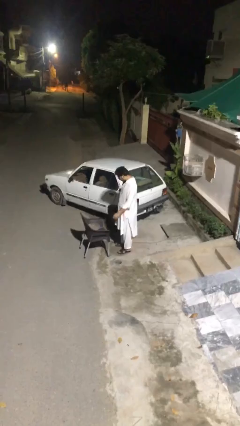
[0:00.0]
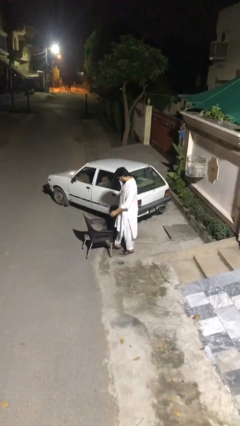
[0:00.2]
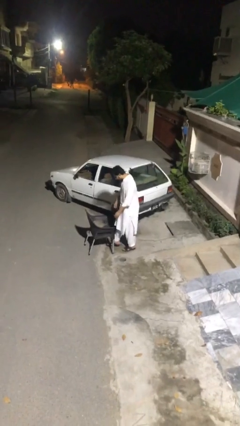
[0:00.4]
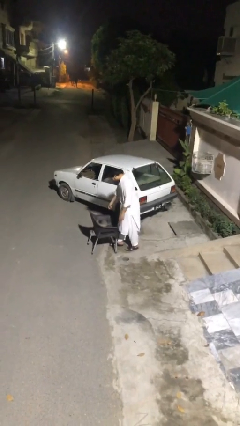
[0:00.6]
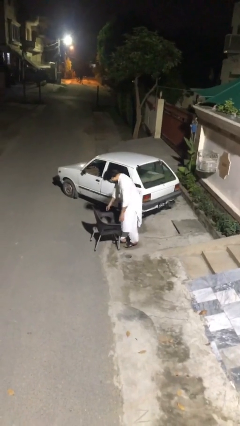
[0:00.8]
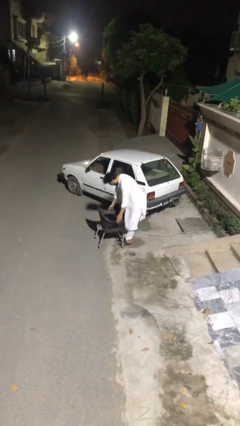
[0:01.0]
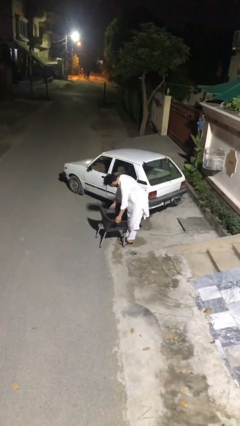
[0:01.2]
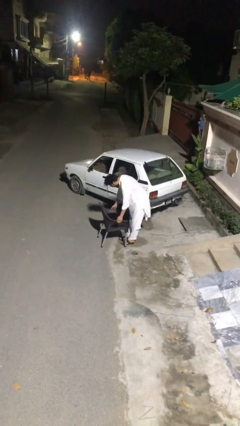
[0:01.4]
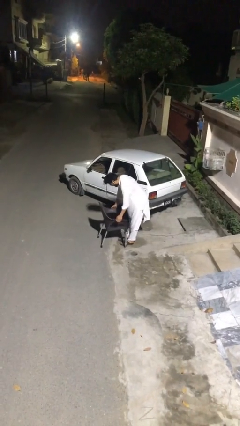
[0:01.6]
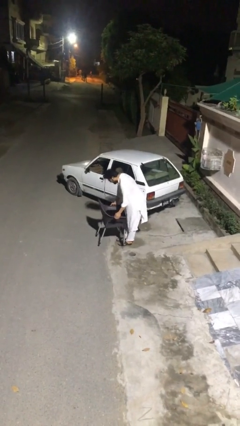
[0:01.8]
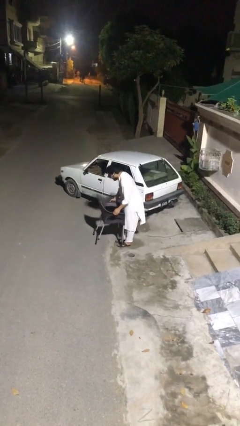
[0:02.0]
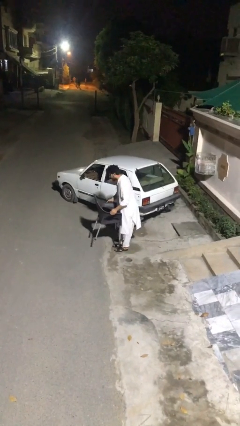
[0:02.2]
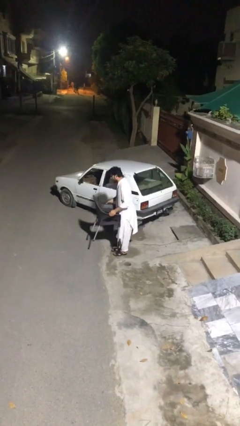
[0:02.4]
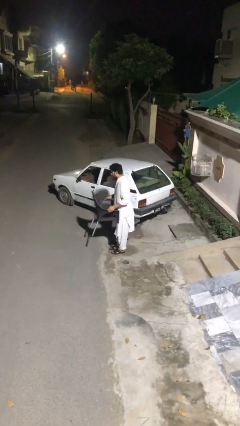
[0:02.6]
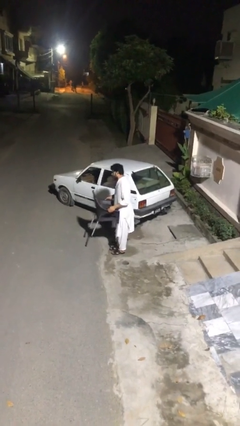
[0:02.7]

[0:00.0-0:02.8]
person picks up object from floor

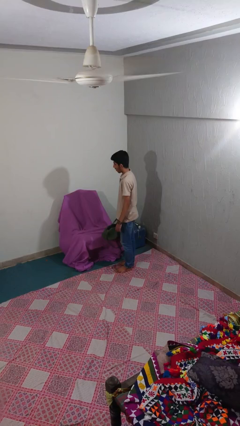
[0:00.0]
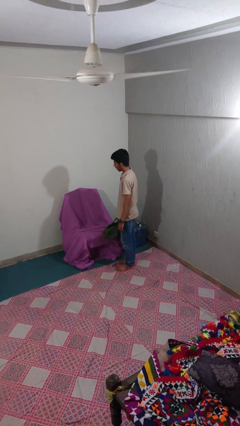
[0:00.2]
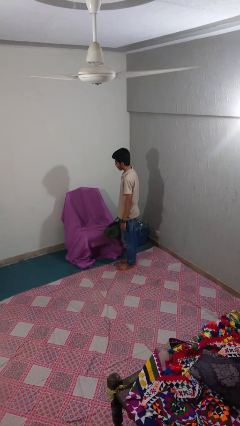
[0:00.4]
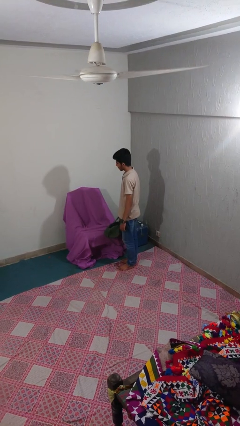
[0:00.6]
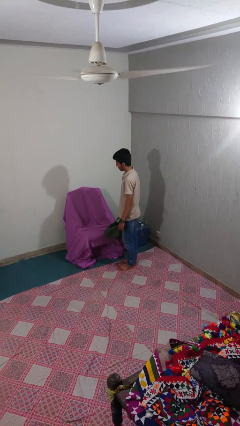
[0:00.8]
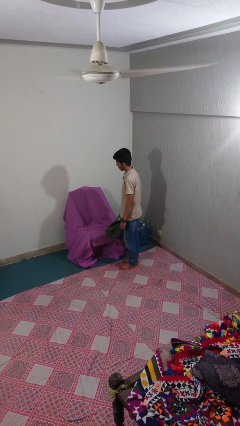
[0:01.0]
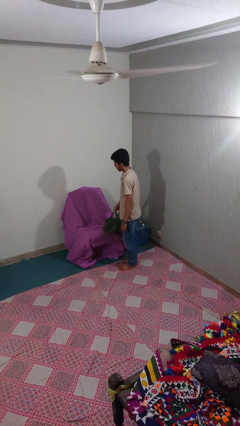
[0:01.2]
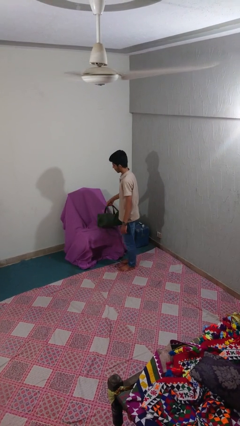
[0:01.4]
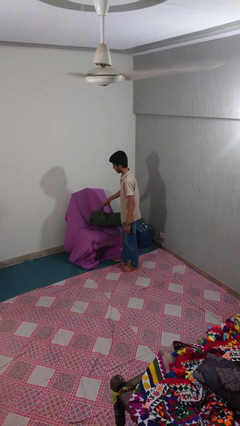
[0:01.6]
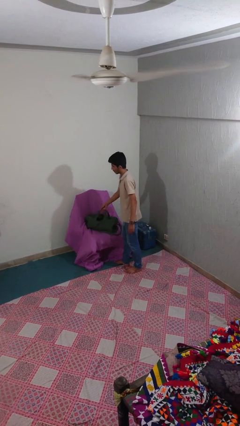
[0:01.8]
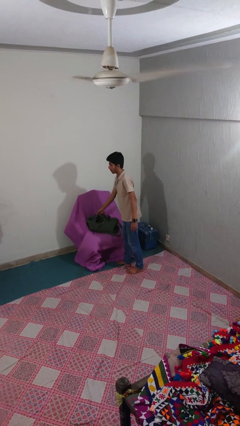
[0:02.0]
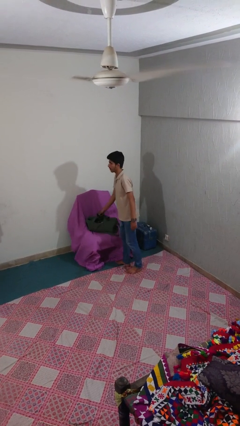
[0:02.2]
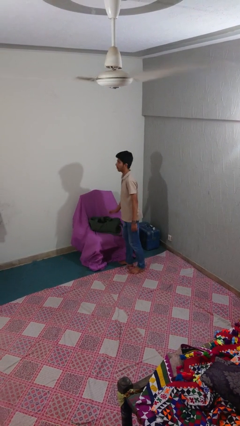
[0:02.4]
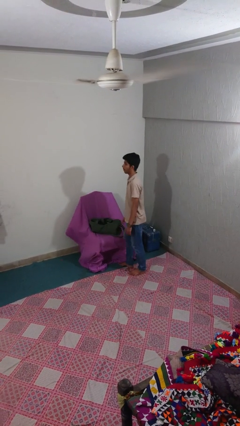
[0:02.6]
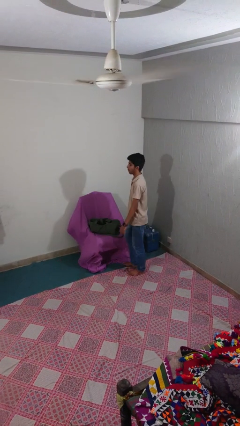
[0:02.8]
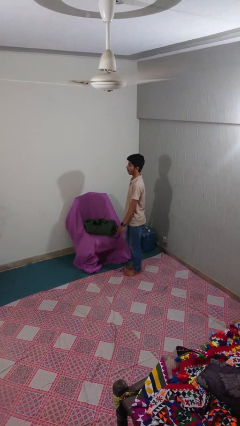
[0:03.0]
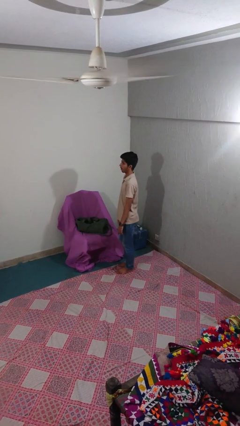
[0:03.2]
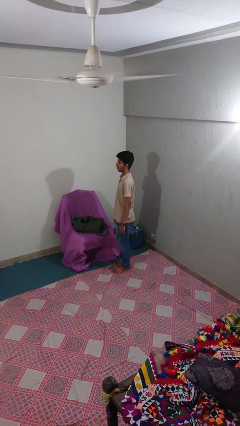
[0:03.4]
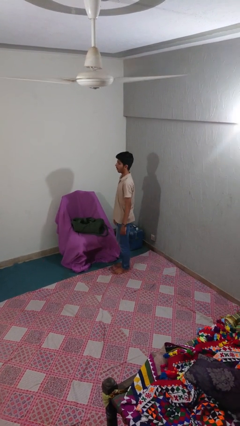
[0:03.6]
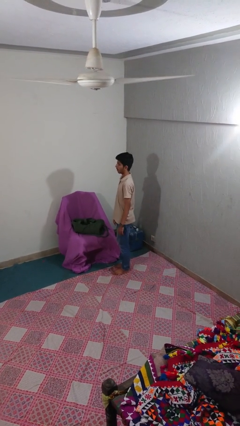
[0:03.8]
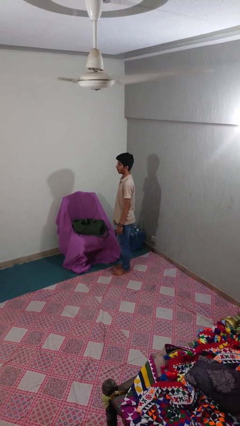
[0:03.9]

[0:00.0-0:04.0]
person puts down object on couch

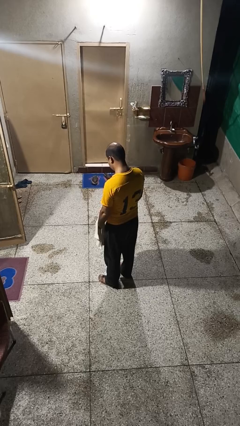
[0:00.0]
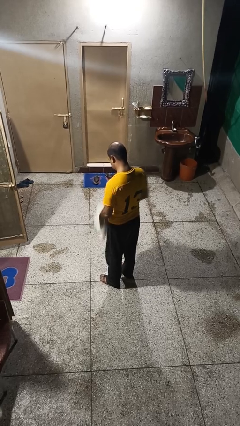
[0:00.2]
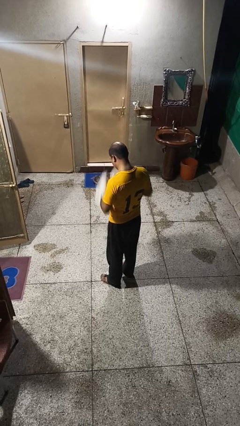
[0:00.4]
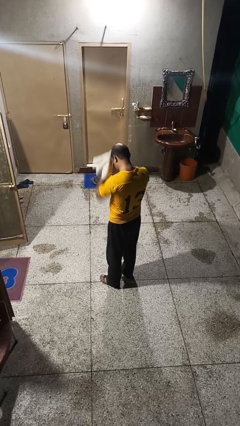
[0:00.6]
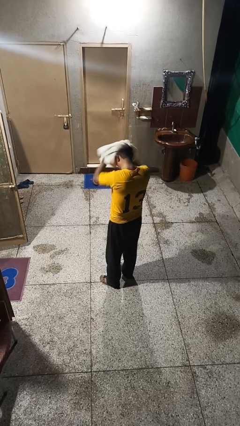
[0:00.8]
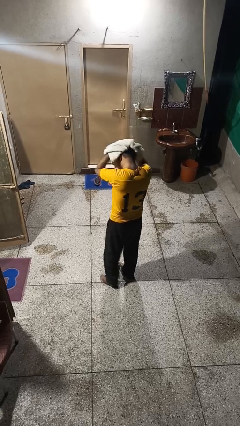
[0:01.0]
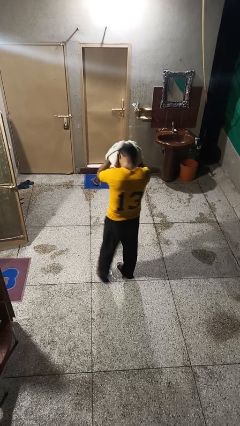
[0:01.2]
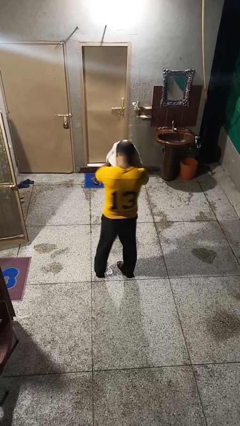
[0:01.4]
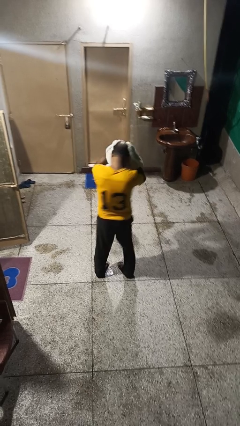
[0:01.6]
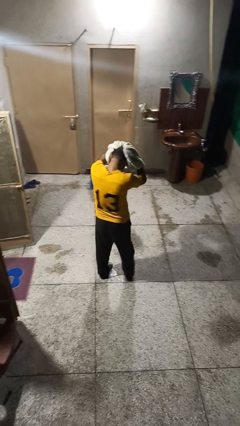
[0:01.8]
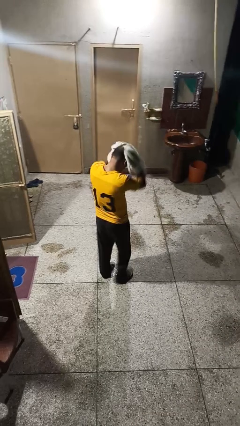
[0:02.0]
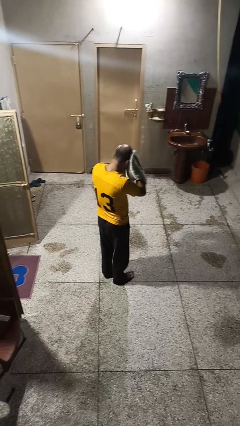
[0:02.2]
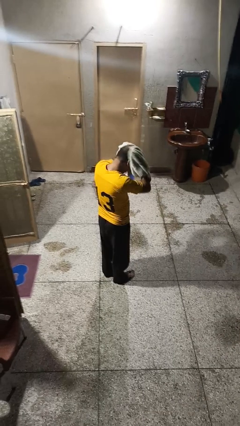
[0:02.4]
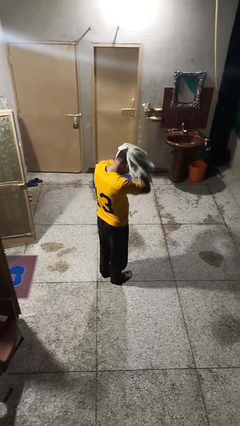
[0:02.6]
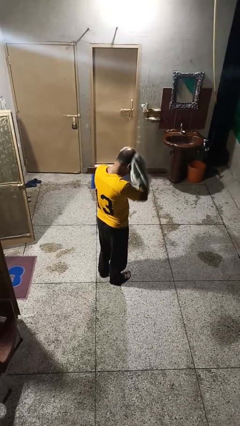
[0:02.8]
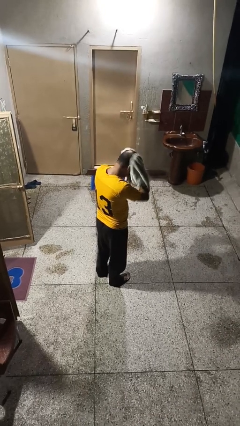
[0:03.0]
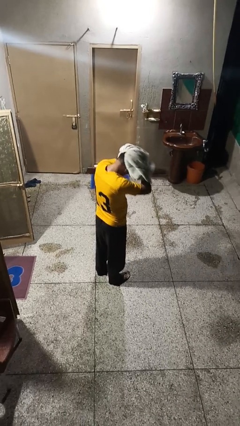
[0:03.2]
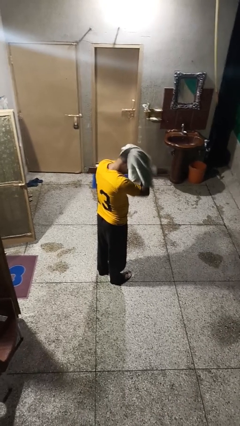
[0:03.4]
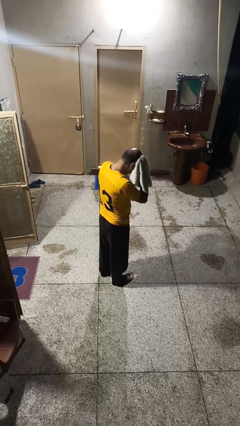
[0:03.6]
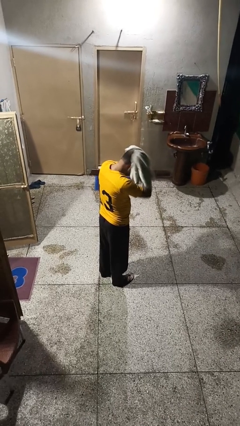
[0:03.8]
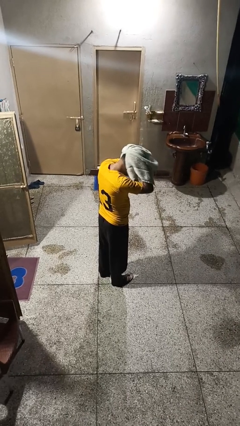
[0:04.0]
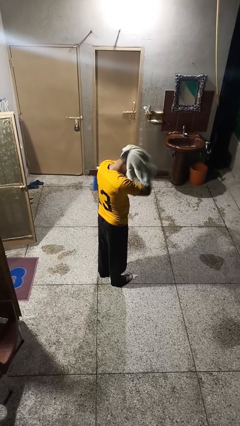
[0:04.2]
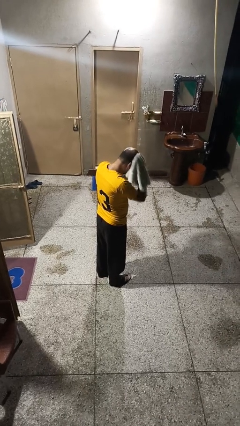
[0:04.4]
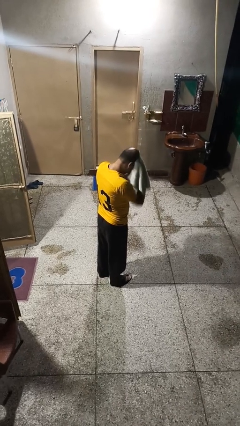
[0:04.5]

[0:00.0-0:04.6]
person dries hair with towel

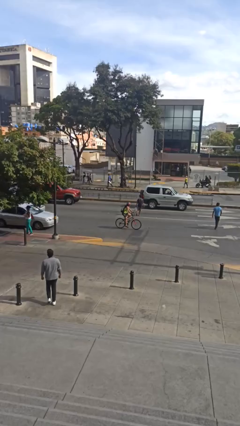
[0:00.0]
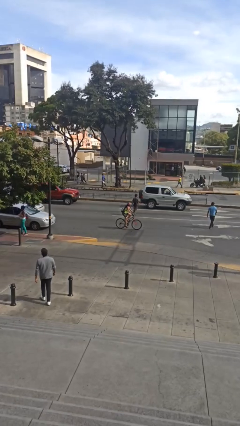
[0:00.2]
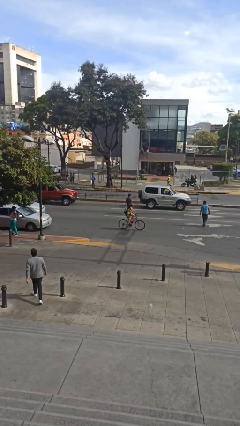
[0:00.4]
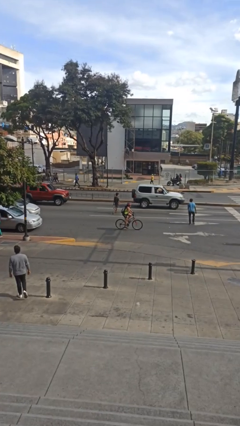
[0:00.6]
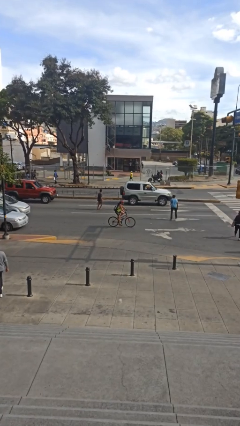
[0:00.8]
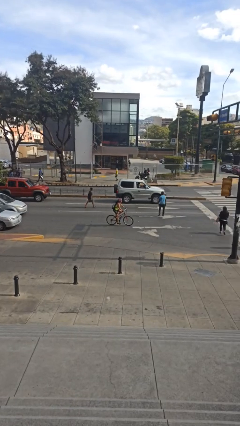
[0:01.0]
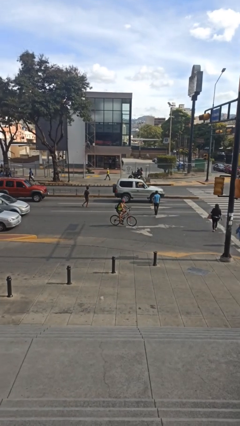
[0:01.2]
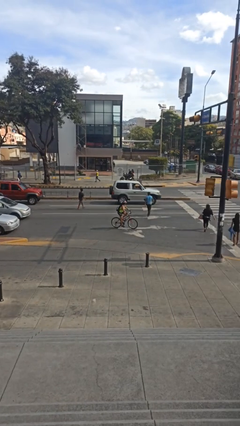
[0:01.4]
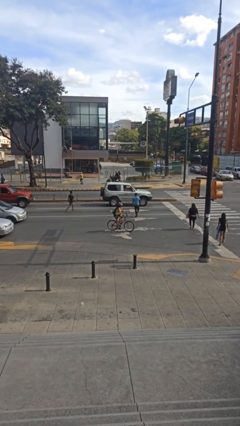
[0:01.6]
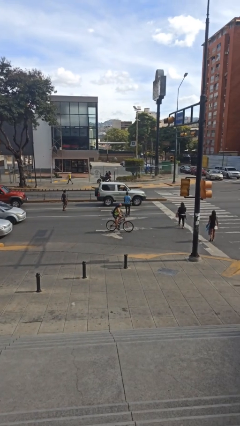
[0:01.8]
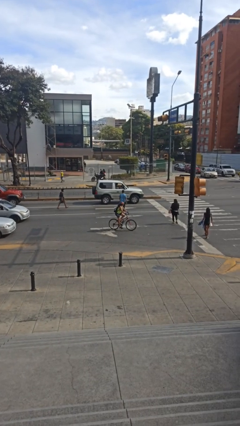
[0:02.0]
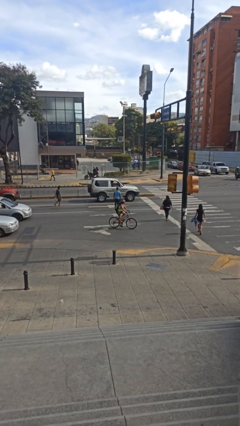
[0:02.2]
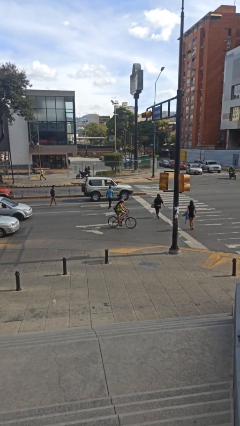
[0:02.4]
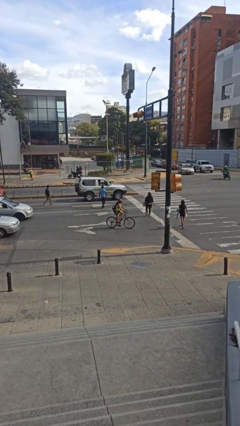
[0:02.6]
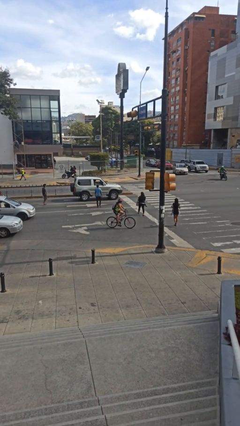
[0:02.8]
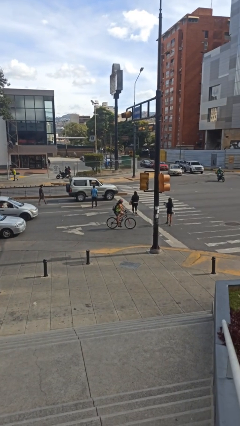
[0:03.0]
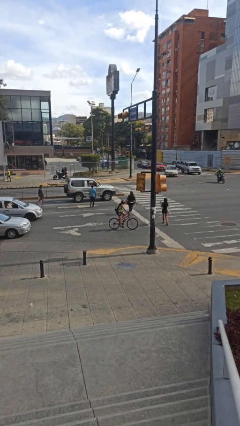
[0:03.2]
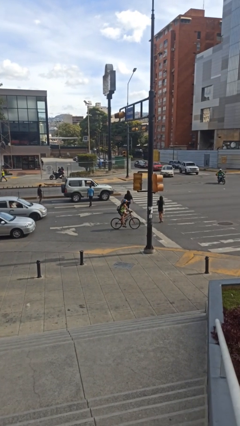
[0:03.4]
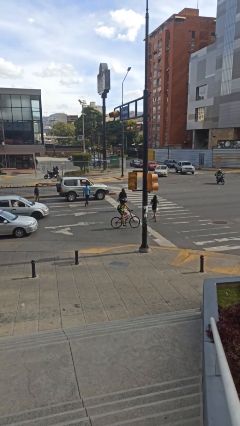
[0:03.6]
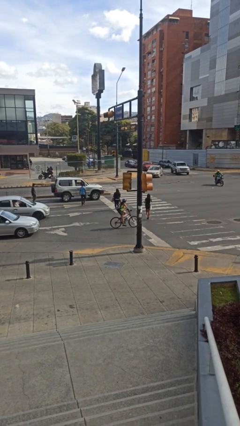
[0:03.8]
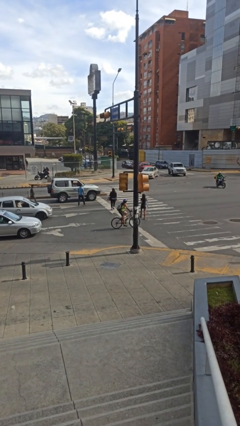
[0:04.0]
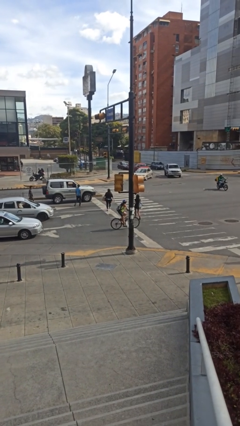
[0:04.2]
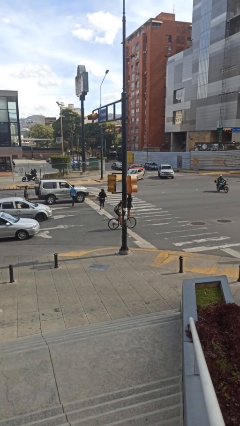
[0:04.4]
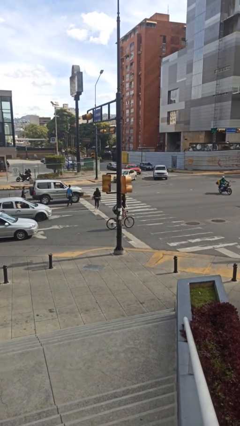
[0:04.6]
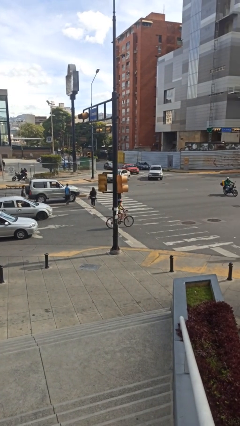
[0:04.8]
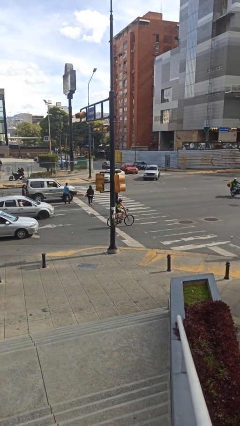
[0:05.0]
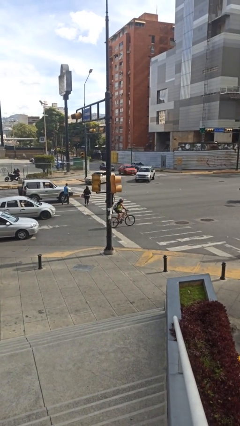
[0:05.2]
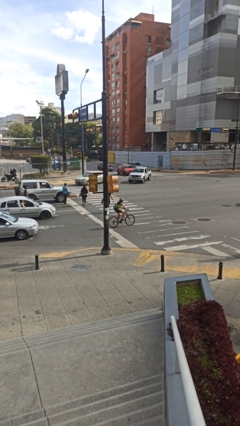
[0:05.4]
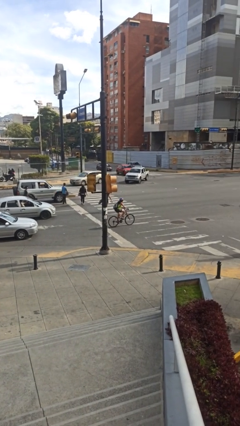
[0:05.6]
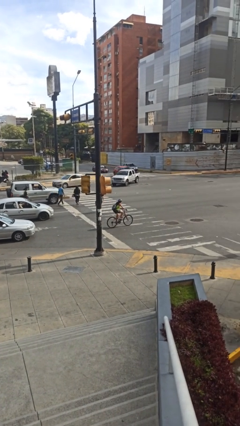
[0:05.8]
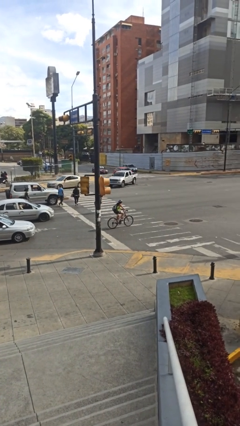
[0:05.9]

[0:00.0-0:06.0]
person rides bicycle

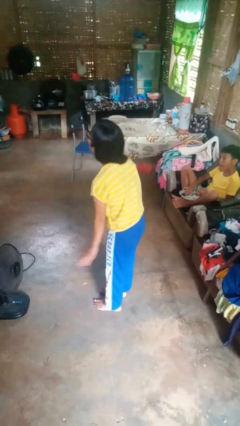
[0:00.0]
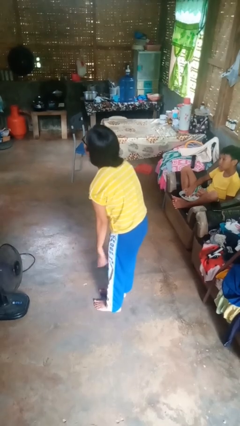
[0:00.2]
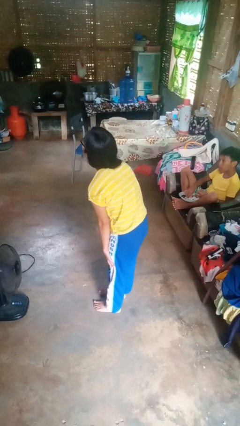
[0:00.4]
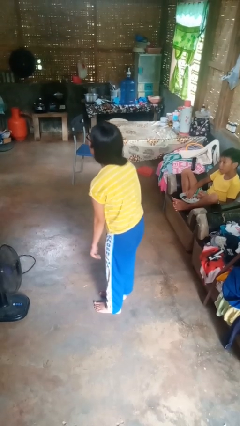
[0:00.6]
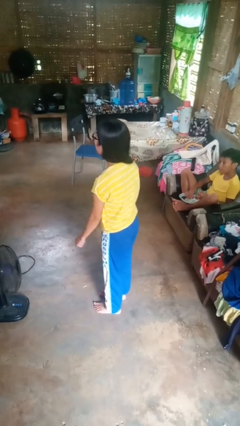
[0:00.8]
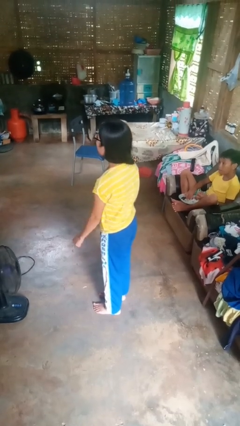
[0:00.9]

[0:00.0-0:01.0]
person slaps hands on thighs
